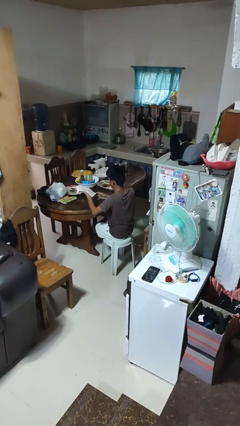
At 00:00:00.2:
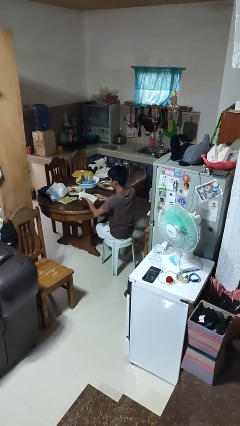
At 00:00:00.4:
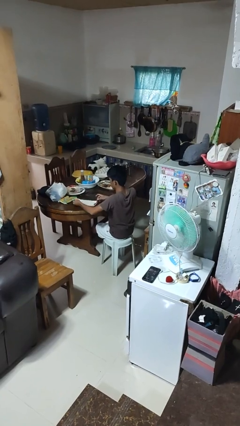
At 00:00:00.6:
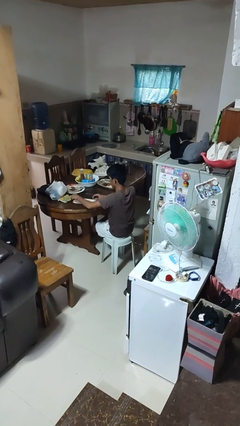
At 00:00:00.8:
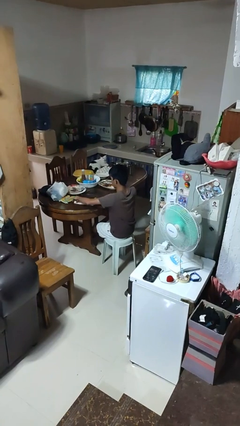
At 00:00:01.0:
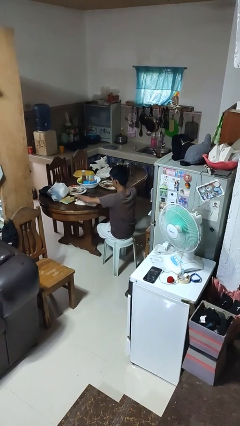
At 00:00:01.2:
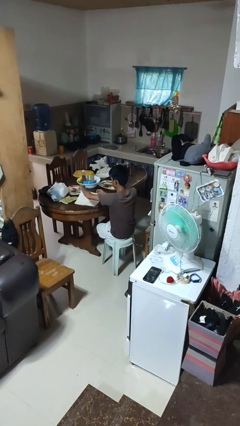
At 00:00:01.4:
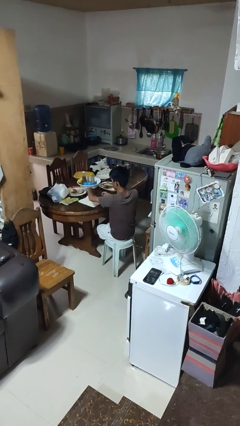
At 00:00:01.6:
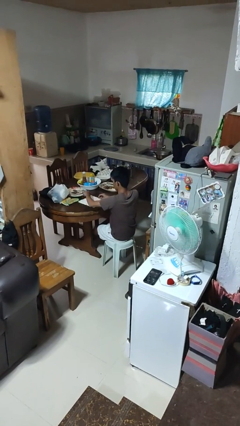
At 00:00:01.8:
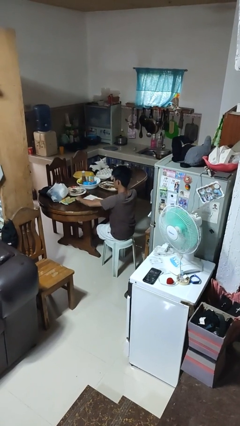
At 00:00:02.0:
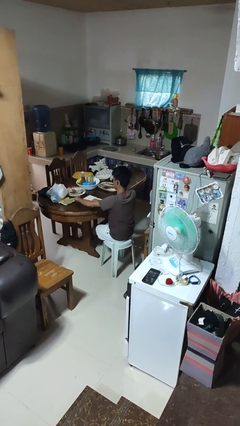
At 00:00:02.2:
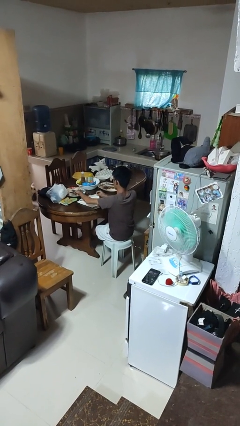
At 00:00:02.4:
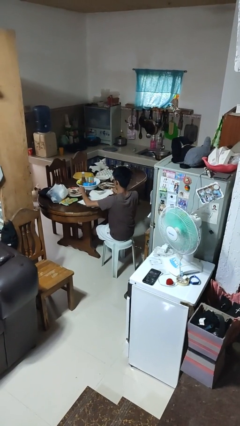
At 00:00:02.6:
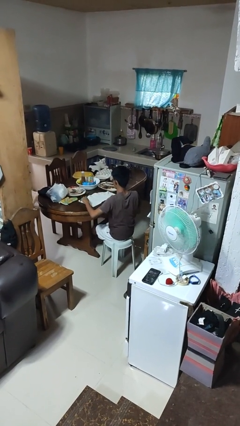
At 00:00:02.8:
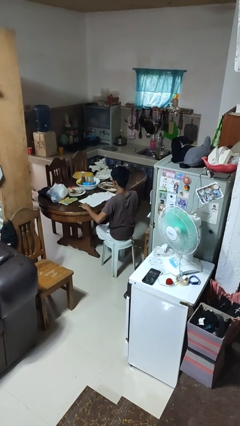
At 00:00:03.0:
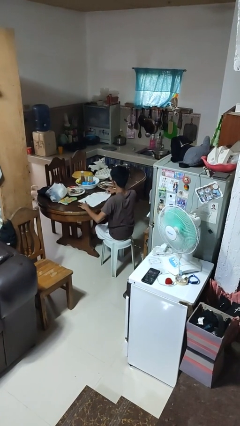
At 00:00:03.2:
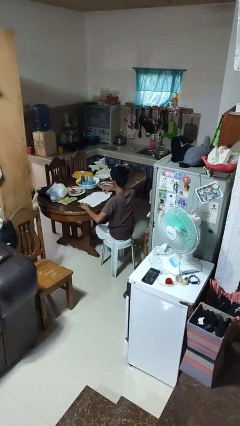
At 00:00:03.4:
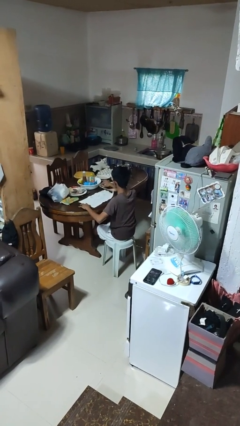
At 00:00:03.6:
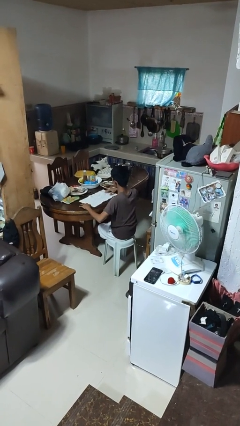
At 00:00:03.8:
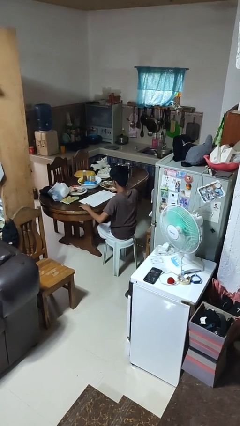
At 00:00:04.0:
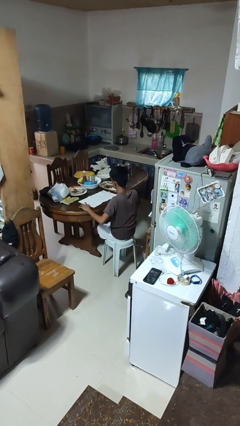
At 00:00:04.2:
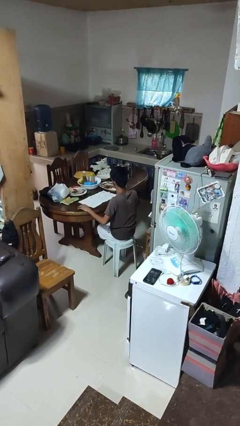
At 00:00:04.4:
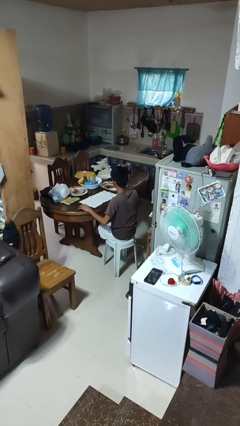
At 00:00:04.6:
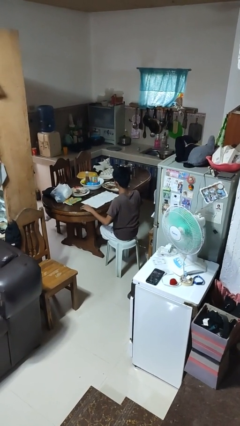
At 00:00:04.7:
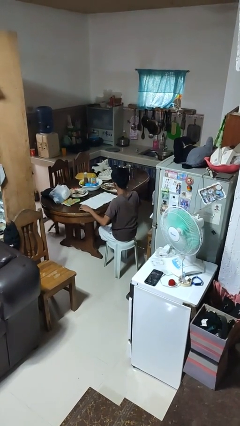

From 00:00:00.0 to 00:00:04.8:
person spreads tablecloth

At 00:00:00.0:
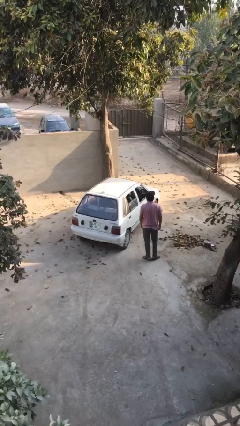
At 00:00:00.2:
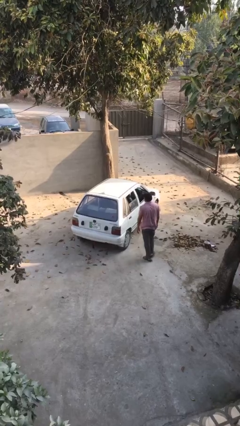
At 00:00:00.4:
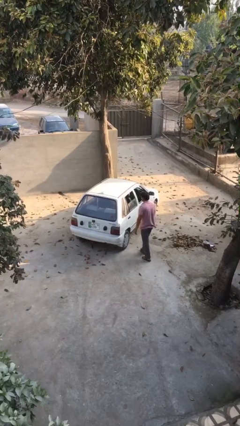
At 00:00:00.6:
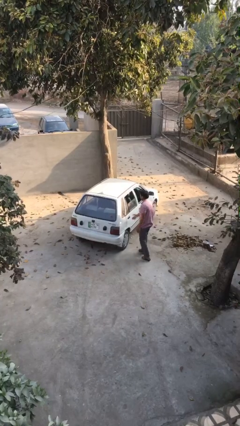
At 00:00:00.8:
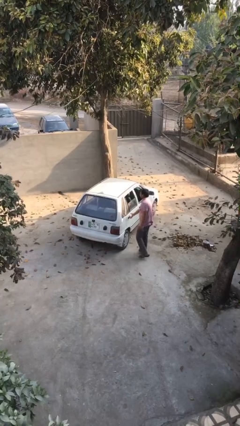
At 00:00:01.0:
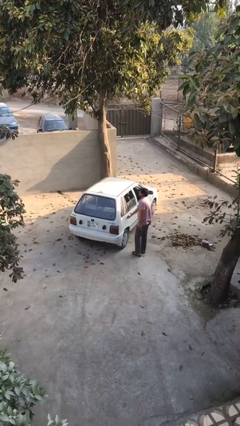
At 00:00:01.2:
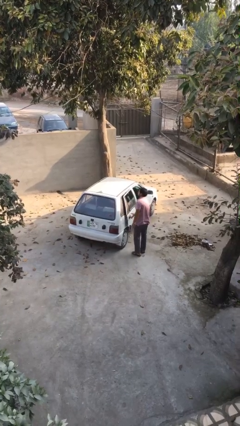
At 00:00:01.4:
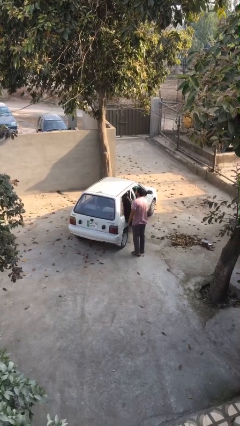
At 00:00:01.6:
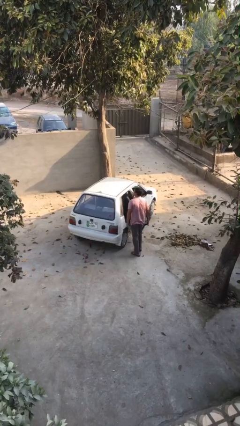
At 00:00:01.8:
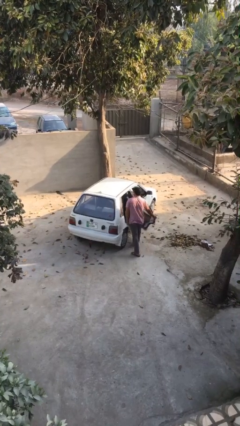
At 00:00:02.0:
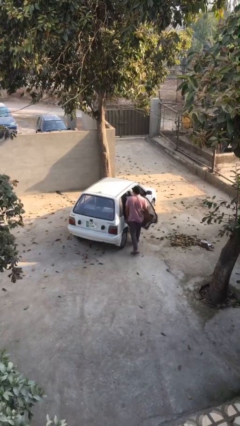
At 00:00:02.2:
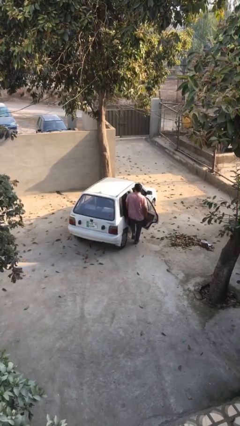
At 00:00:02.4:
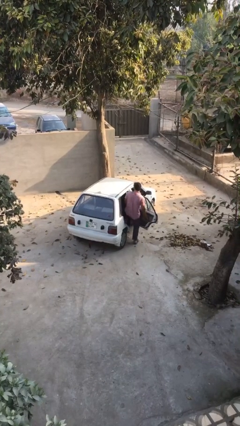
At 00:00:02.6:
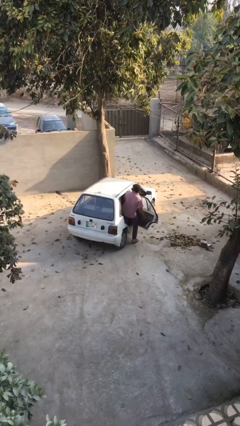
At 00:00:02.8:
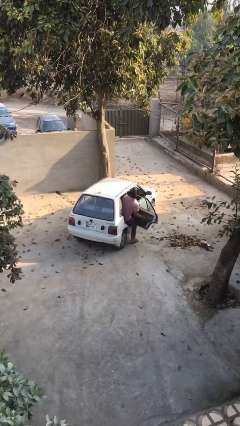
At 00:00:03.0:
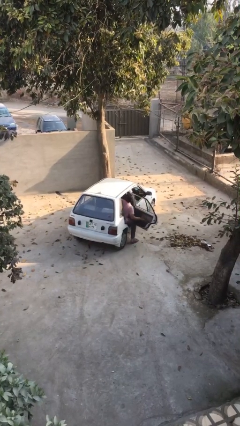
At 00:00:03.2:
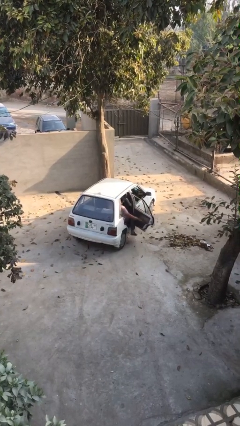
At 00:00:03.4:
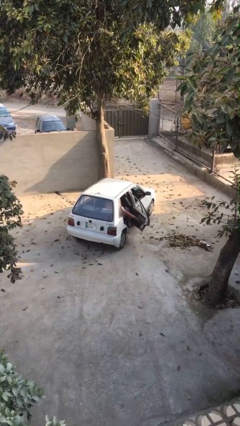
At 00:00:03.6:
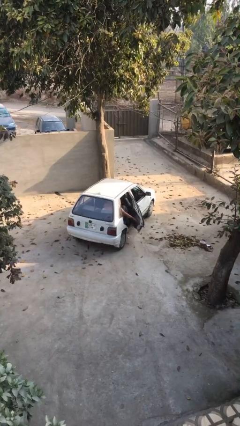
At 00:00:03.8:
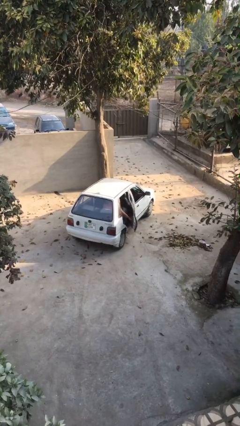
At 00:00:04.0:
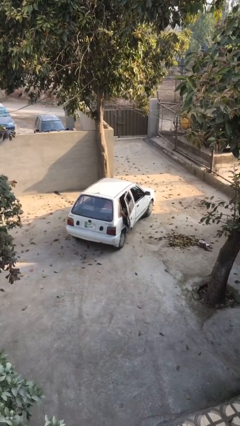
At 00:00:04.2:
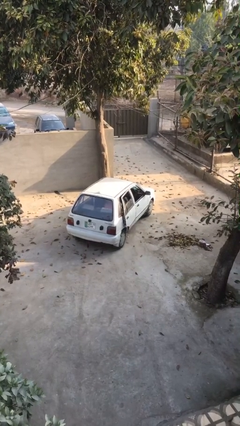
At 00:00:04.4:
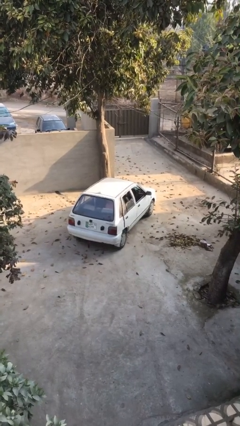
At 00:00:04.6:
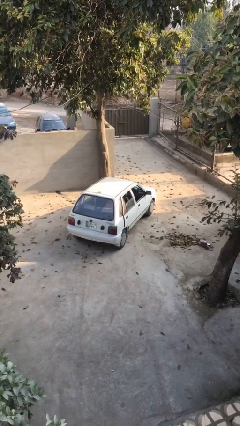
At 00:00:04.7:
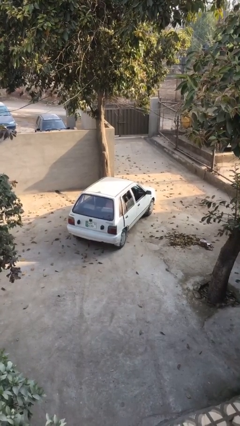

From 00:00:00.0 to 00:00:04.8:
car picks up person

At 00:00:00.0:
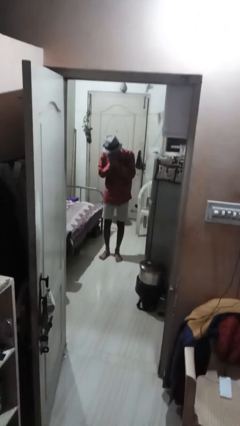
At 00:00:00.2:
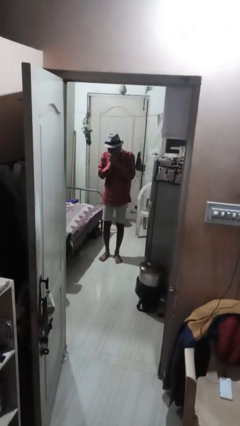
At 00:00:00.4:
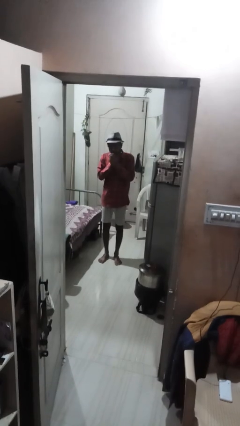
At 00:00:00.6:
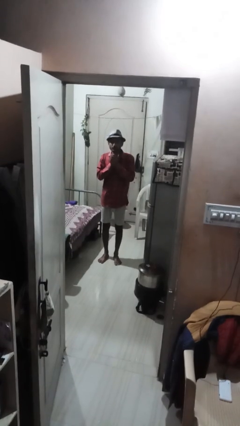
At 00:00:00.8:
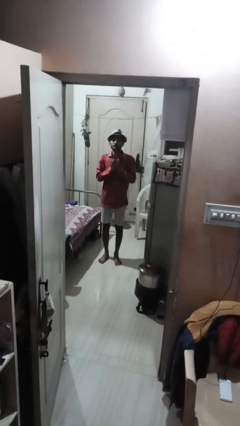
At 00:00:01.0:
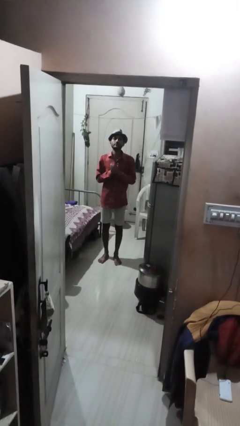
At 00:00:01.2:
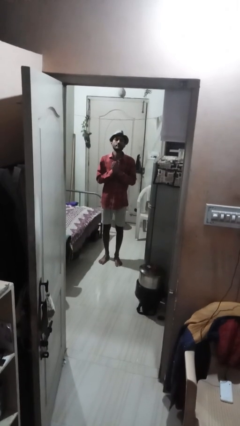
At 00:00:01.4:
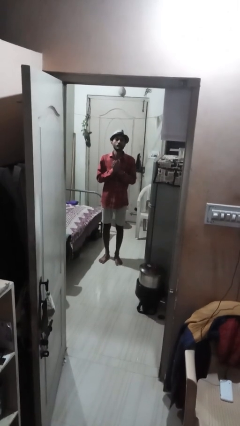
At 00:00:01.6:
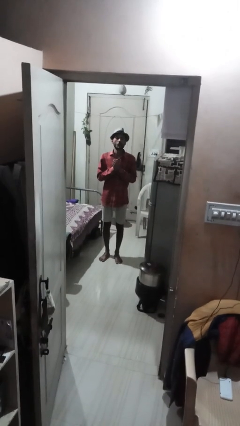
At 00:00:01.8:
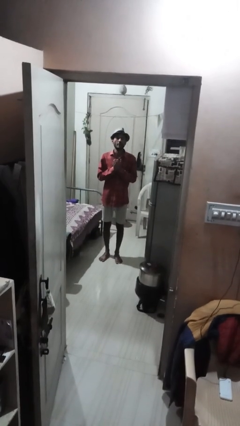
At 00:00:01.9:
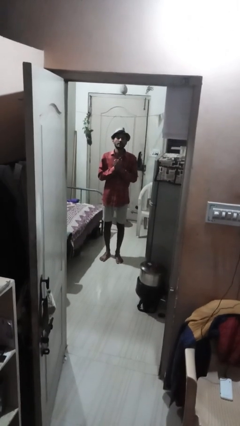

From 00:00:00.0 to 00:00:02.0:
person sneezes into hand

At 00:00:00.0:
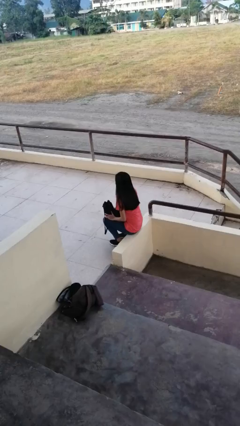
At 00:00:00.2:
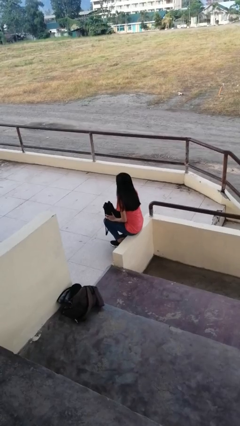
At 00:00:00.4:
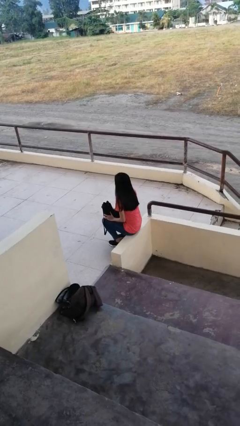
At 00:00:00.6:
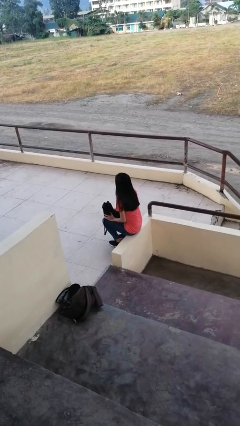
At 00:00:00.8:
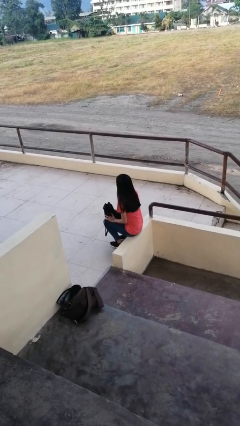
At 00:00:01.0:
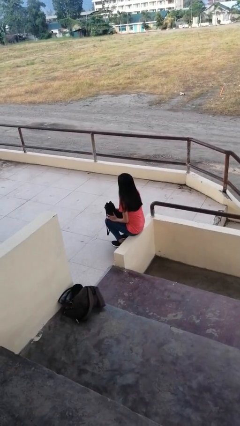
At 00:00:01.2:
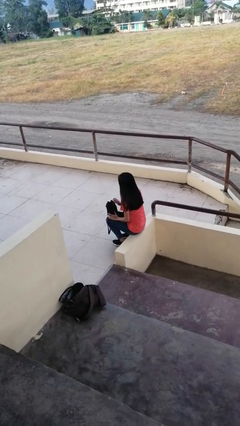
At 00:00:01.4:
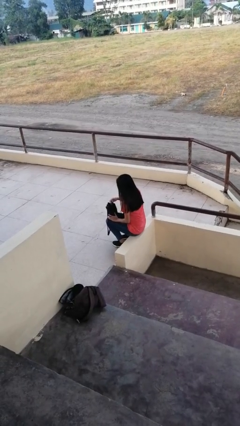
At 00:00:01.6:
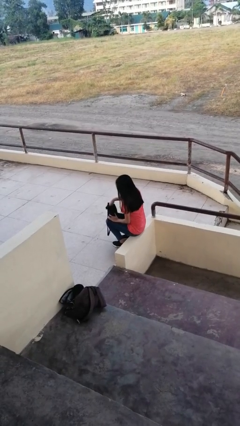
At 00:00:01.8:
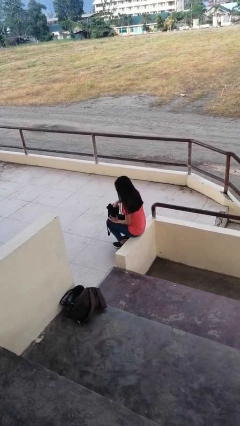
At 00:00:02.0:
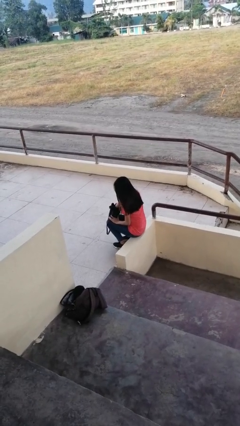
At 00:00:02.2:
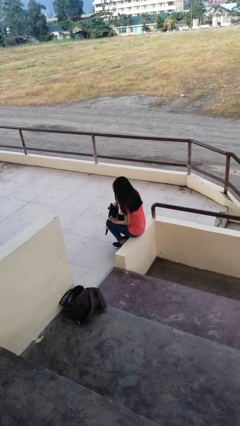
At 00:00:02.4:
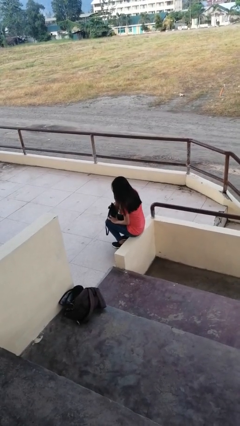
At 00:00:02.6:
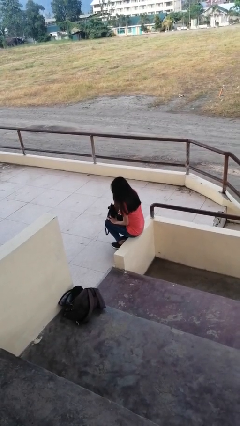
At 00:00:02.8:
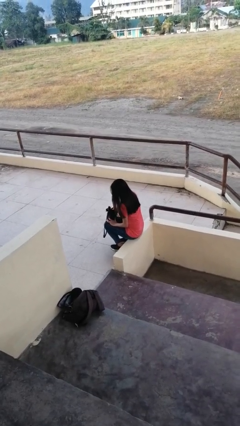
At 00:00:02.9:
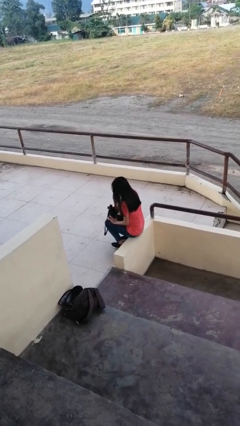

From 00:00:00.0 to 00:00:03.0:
person searches in purse

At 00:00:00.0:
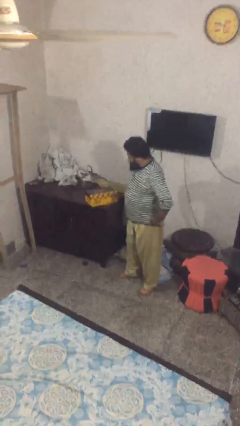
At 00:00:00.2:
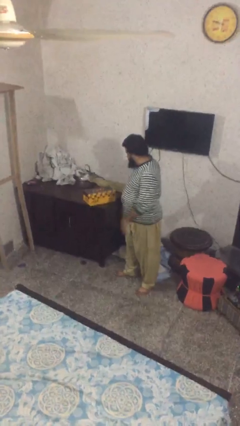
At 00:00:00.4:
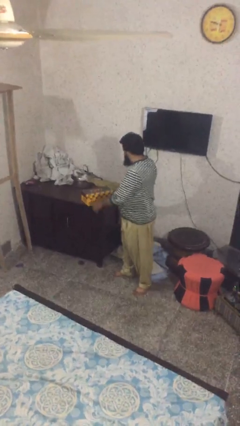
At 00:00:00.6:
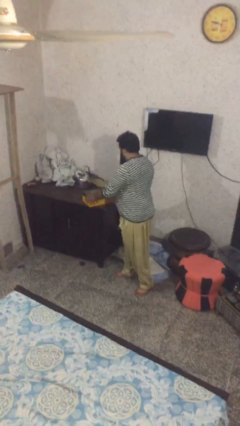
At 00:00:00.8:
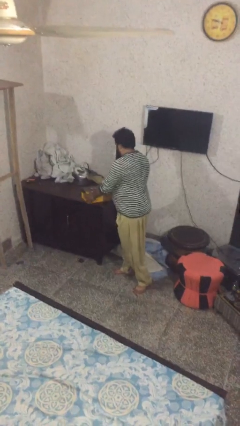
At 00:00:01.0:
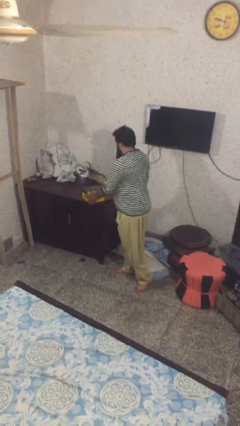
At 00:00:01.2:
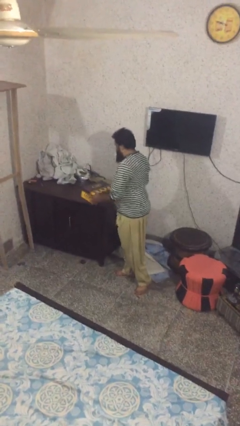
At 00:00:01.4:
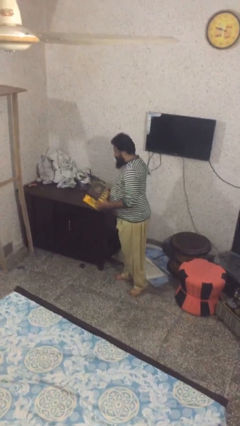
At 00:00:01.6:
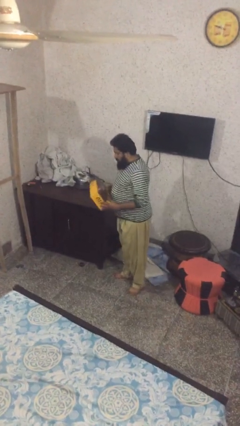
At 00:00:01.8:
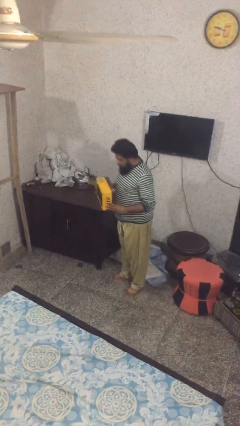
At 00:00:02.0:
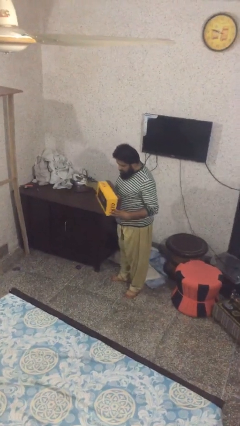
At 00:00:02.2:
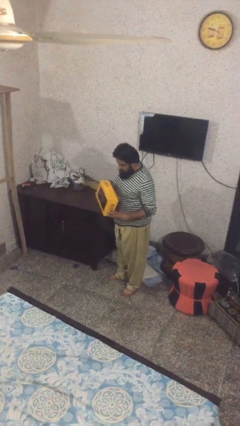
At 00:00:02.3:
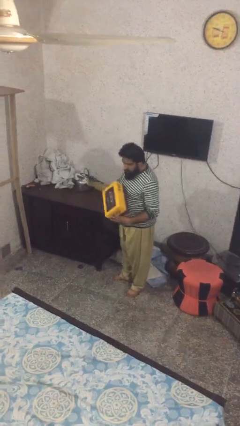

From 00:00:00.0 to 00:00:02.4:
person picks up object from table

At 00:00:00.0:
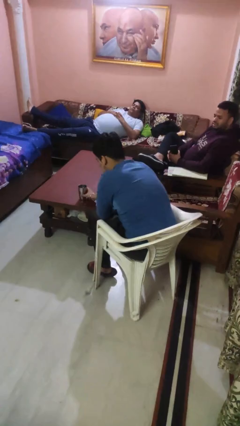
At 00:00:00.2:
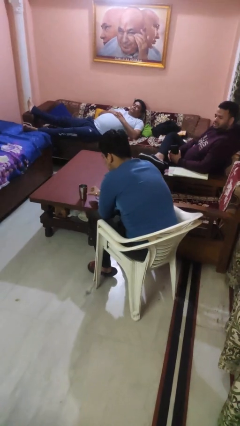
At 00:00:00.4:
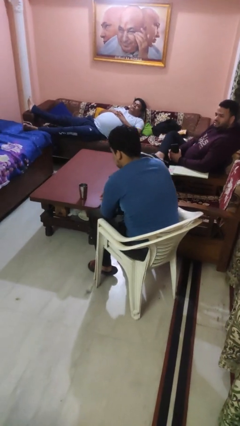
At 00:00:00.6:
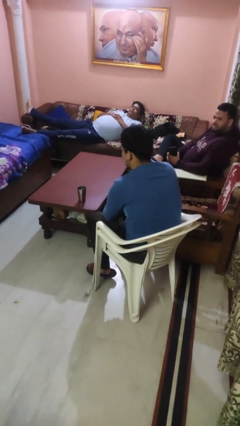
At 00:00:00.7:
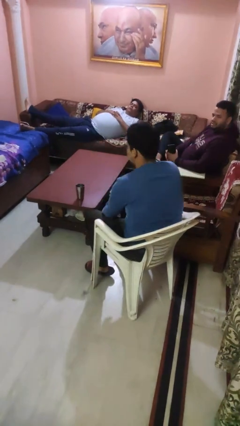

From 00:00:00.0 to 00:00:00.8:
person sets upright glass
